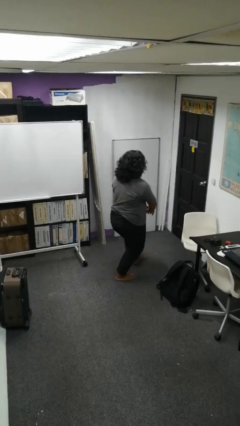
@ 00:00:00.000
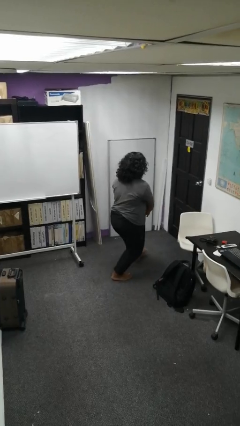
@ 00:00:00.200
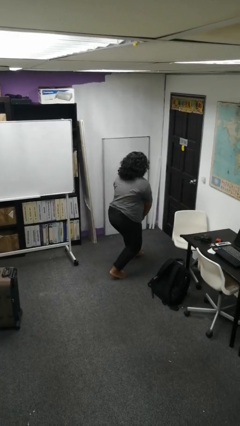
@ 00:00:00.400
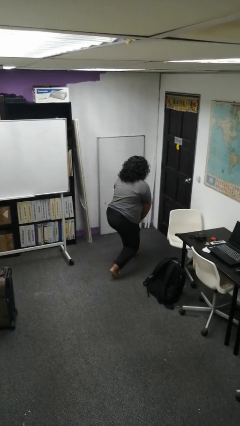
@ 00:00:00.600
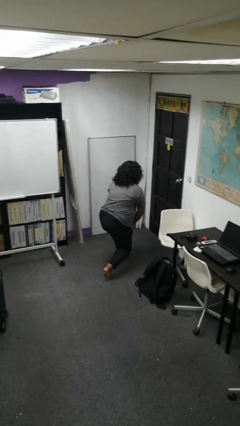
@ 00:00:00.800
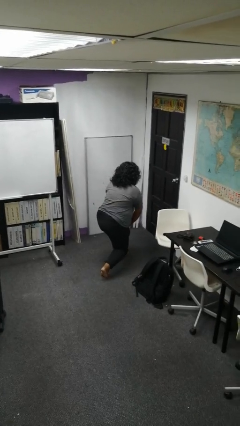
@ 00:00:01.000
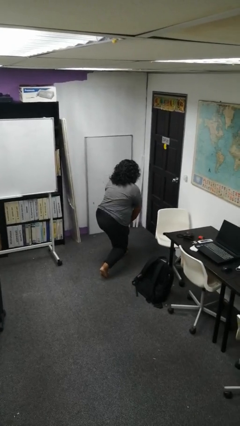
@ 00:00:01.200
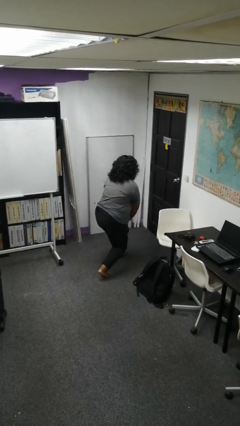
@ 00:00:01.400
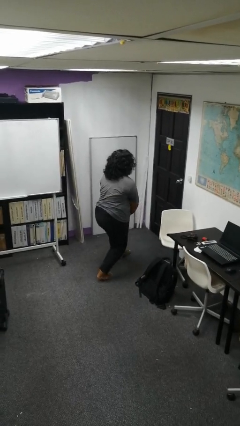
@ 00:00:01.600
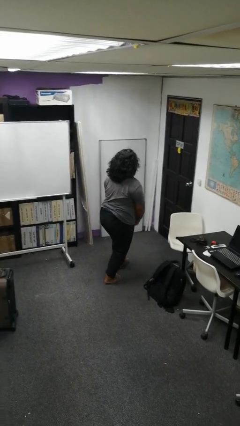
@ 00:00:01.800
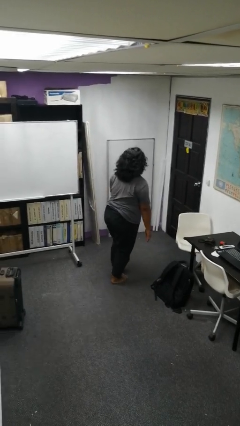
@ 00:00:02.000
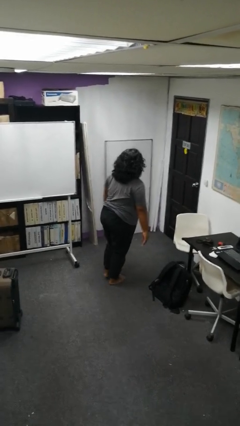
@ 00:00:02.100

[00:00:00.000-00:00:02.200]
person exercises with lunges

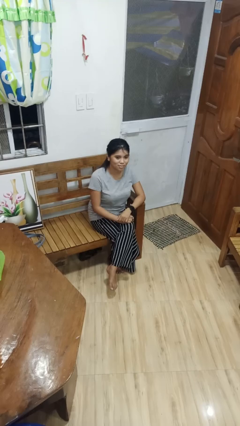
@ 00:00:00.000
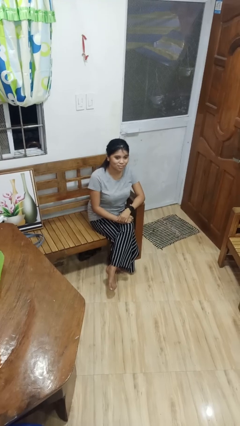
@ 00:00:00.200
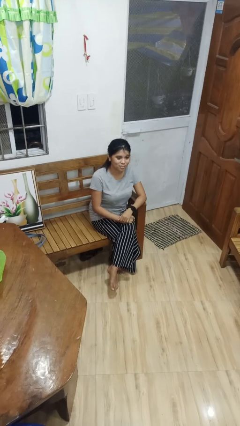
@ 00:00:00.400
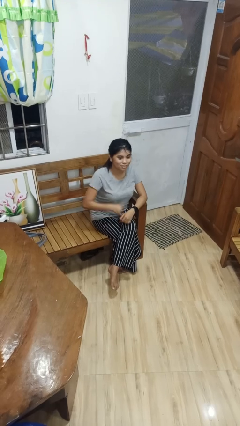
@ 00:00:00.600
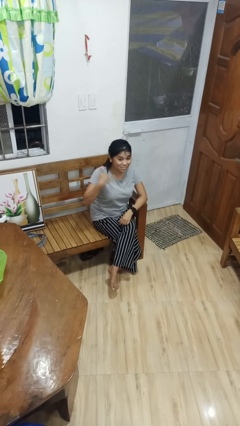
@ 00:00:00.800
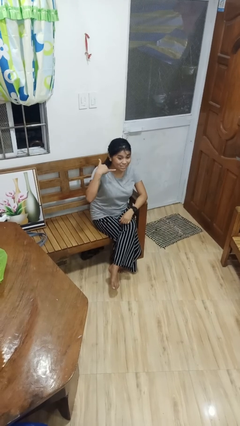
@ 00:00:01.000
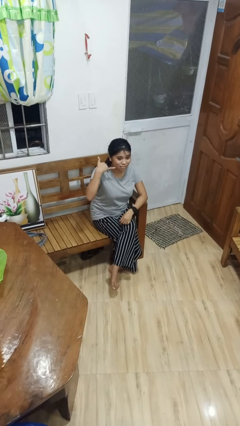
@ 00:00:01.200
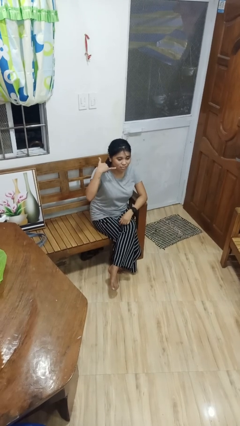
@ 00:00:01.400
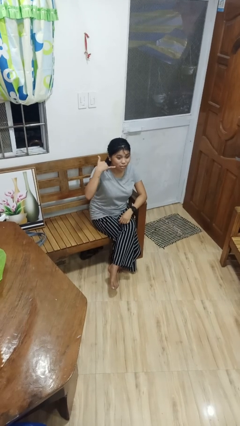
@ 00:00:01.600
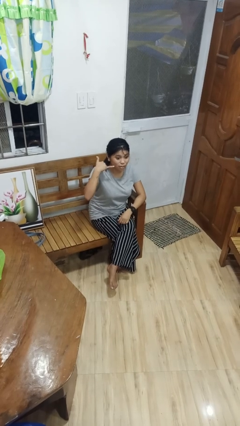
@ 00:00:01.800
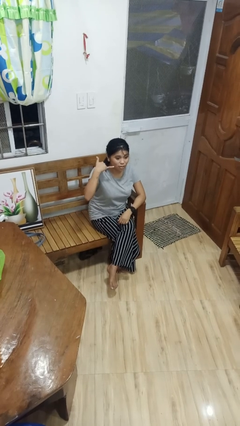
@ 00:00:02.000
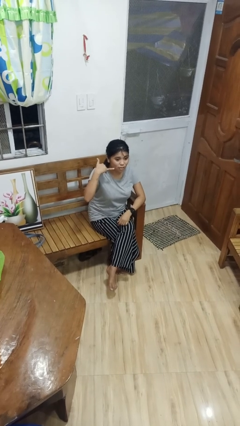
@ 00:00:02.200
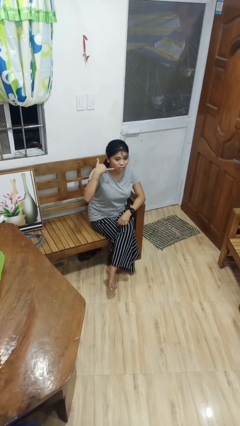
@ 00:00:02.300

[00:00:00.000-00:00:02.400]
person gestures call me

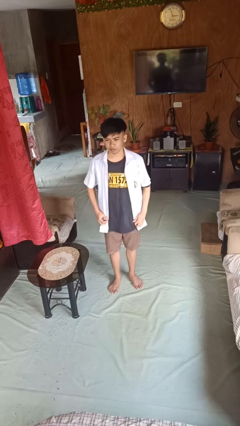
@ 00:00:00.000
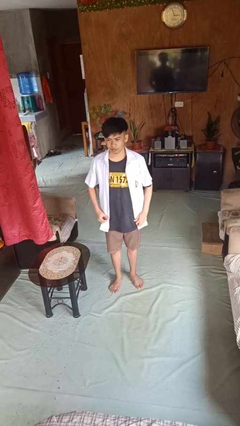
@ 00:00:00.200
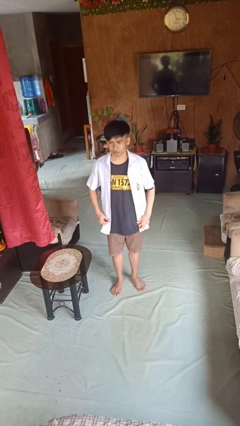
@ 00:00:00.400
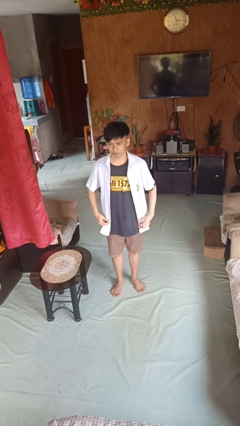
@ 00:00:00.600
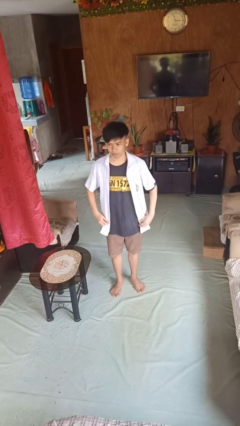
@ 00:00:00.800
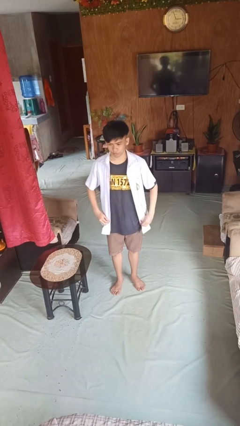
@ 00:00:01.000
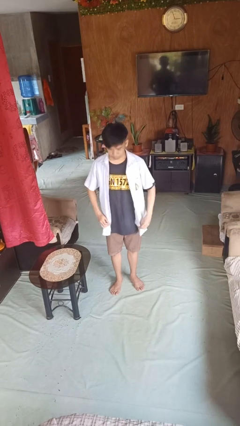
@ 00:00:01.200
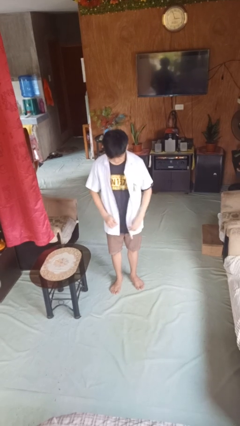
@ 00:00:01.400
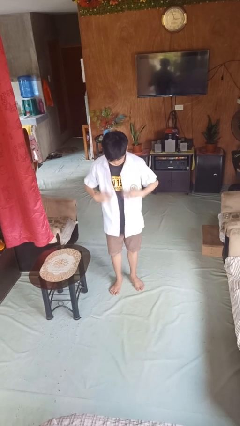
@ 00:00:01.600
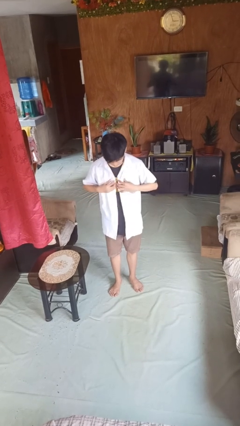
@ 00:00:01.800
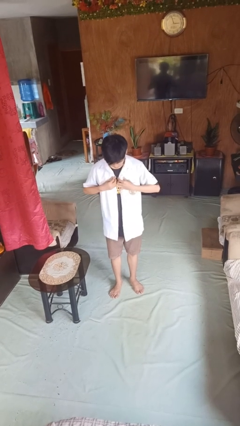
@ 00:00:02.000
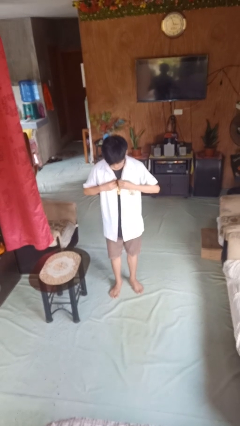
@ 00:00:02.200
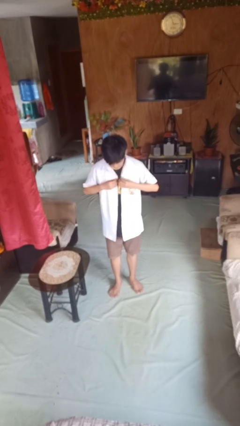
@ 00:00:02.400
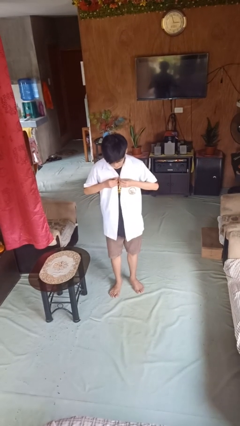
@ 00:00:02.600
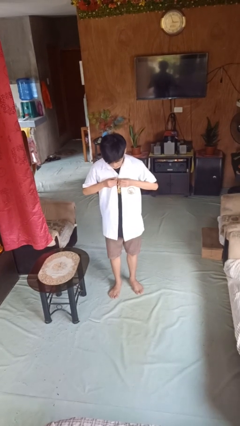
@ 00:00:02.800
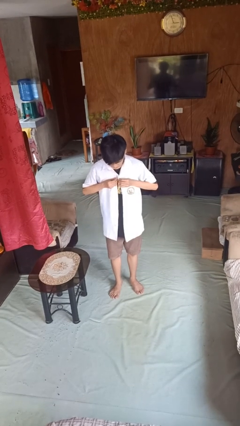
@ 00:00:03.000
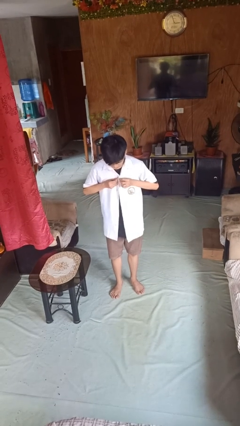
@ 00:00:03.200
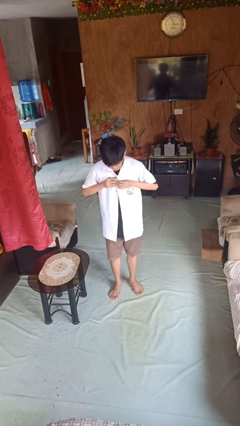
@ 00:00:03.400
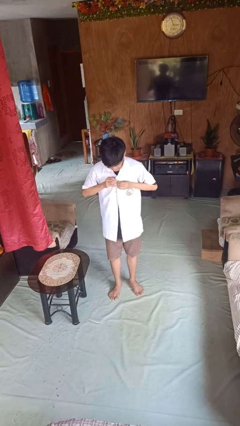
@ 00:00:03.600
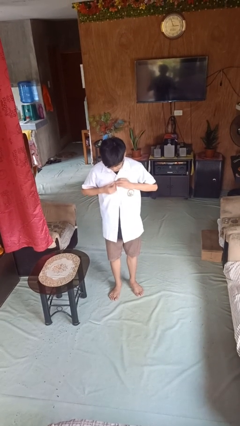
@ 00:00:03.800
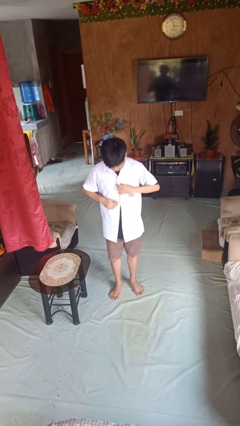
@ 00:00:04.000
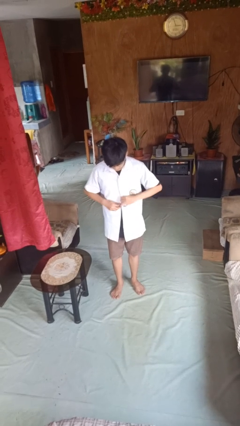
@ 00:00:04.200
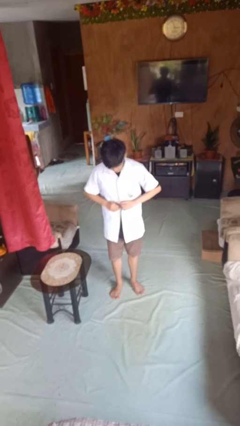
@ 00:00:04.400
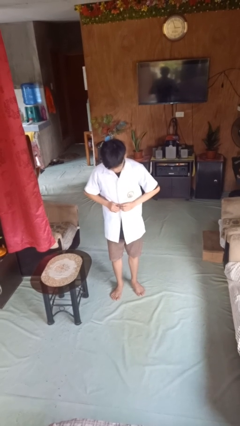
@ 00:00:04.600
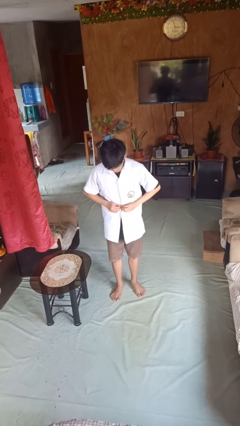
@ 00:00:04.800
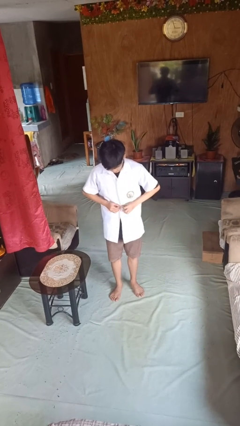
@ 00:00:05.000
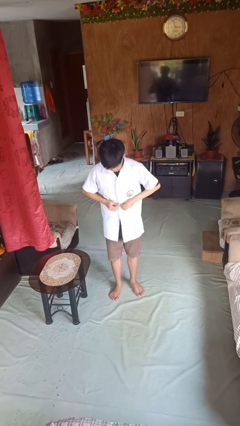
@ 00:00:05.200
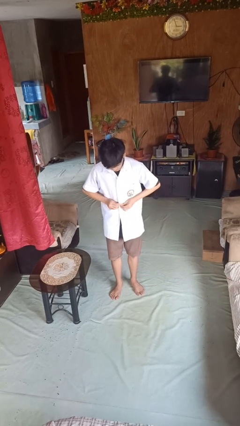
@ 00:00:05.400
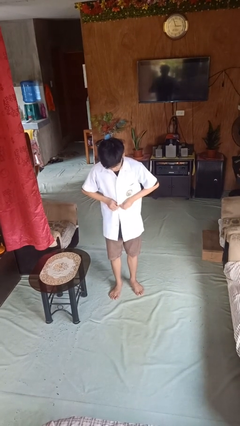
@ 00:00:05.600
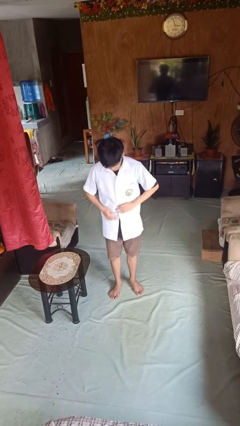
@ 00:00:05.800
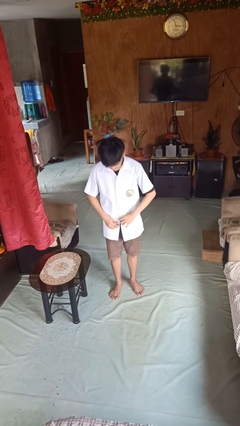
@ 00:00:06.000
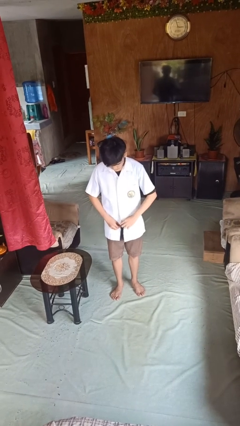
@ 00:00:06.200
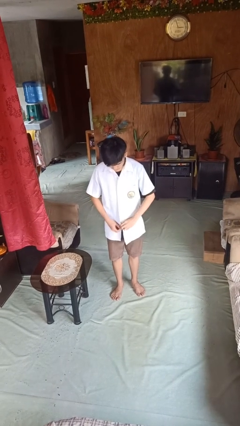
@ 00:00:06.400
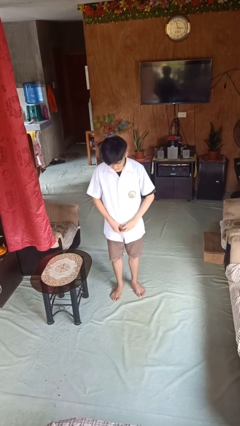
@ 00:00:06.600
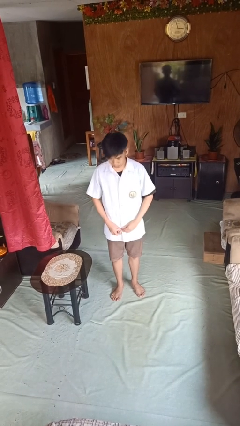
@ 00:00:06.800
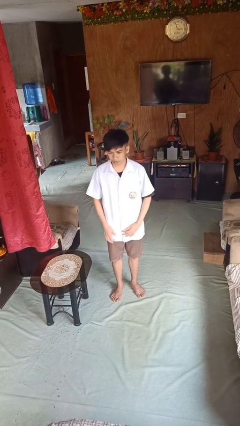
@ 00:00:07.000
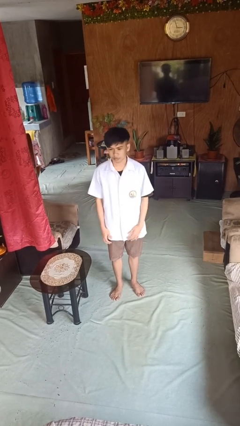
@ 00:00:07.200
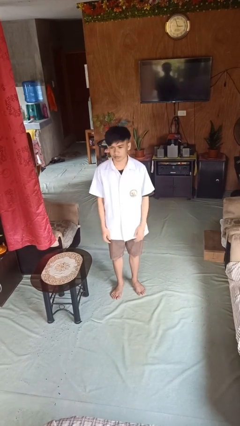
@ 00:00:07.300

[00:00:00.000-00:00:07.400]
person buttons shirt

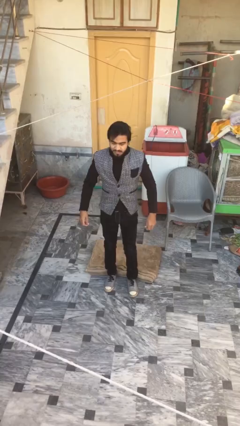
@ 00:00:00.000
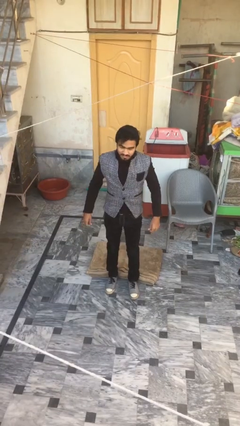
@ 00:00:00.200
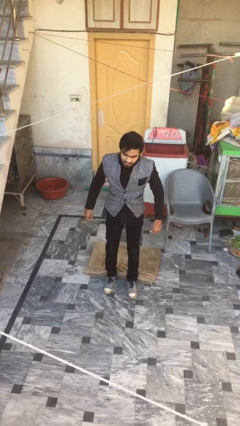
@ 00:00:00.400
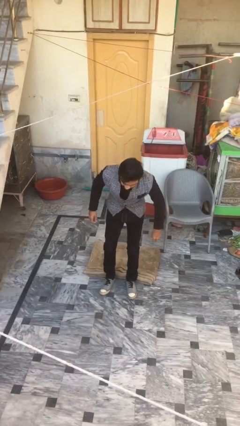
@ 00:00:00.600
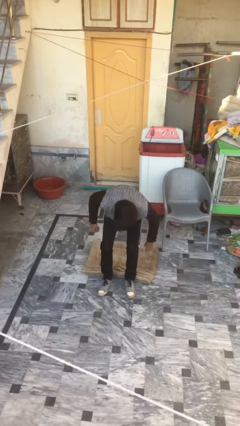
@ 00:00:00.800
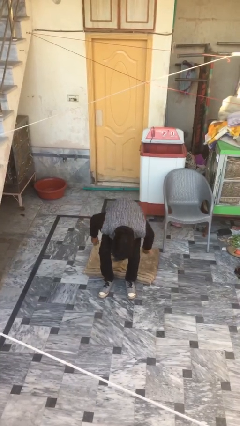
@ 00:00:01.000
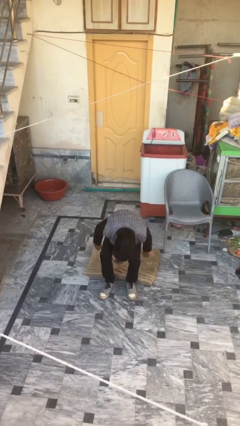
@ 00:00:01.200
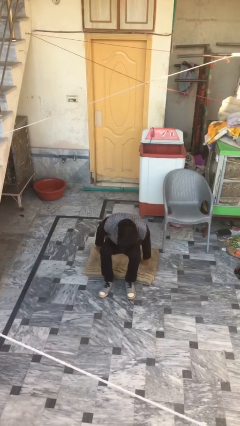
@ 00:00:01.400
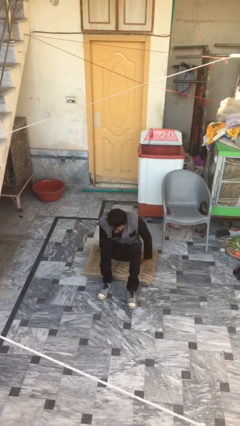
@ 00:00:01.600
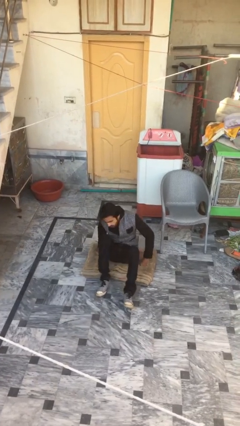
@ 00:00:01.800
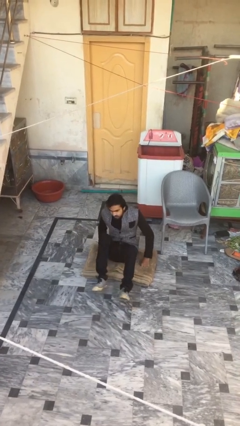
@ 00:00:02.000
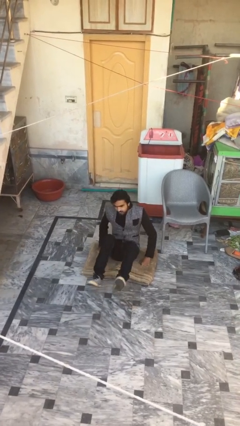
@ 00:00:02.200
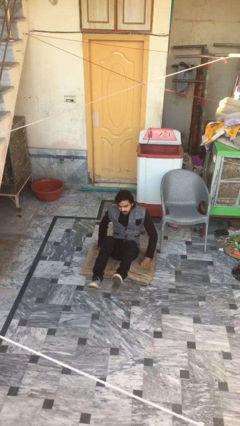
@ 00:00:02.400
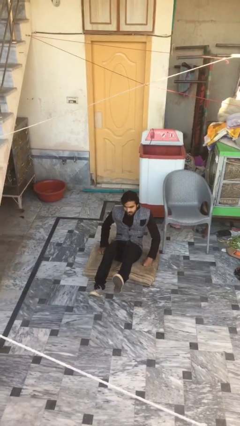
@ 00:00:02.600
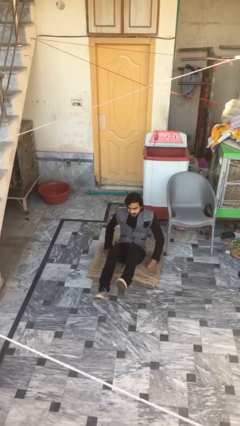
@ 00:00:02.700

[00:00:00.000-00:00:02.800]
person sits down

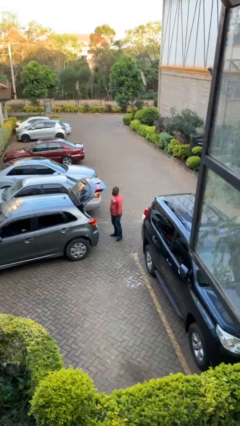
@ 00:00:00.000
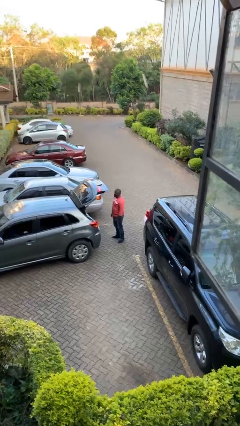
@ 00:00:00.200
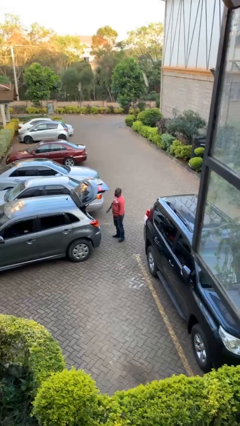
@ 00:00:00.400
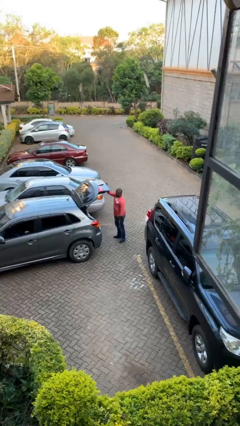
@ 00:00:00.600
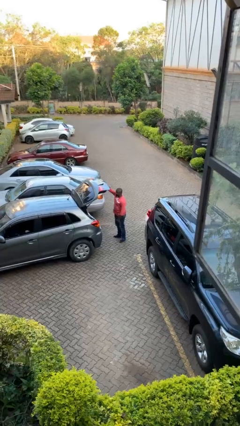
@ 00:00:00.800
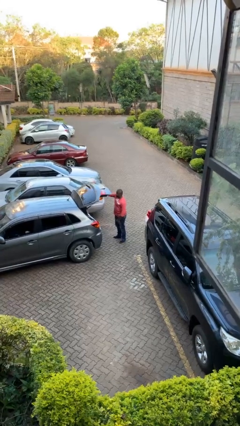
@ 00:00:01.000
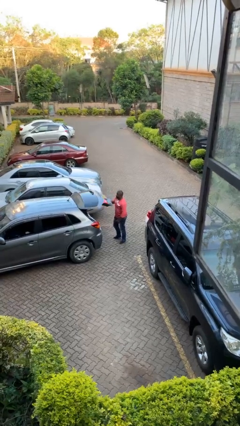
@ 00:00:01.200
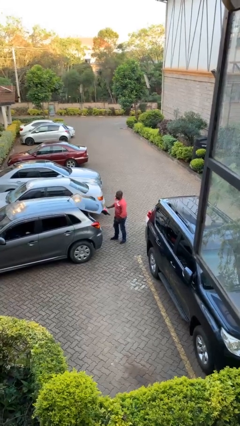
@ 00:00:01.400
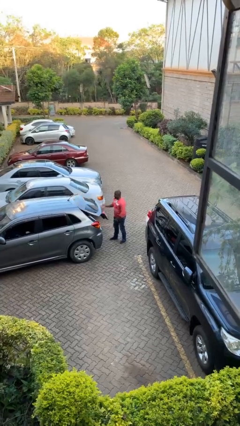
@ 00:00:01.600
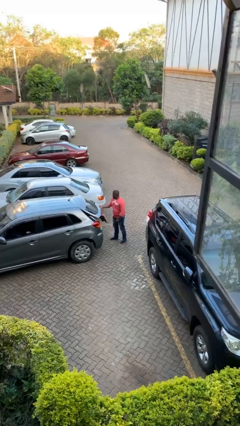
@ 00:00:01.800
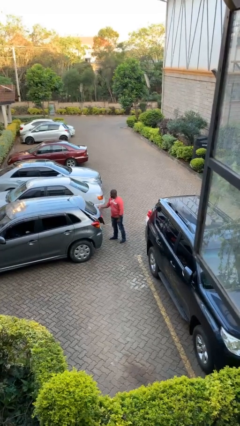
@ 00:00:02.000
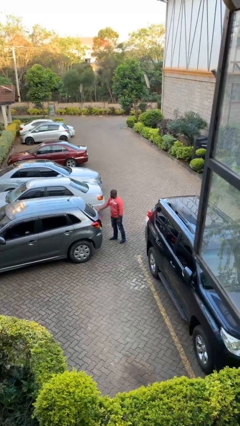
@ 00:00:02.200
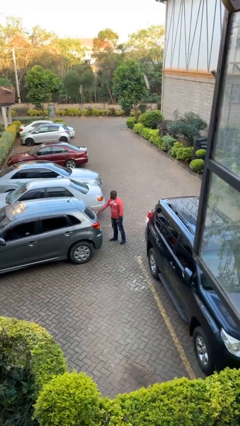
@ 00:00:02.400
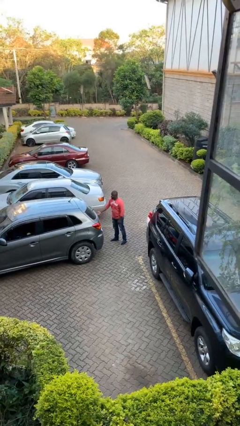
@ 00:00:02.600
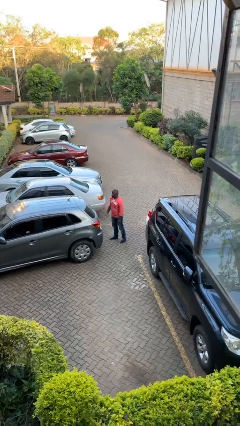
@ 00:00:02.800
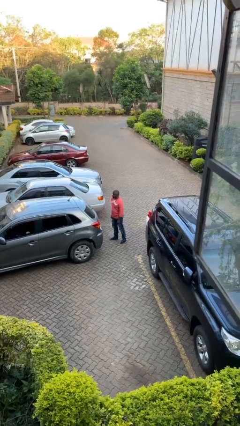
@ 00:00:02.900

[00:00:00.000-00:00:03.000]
person closes car trunk
